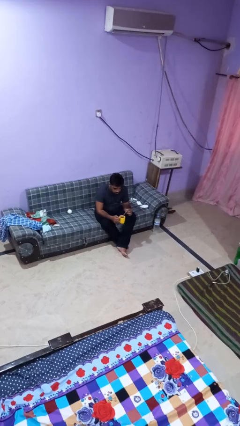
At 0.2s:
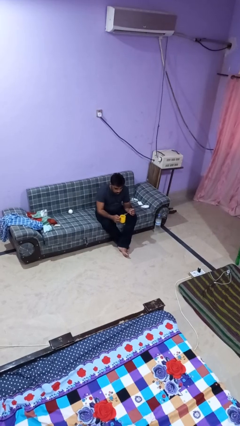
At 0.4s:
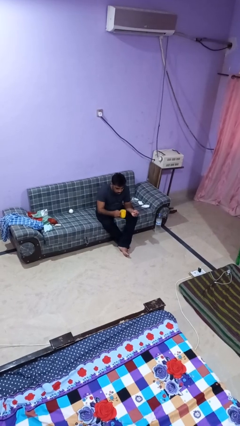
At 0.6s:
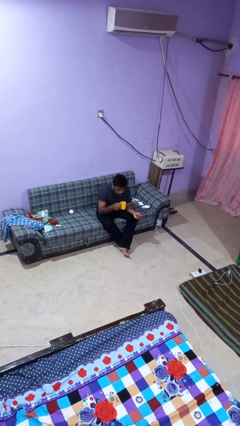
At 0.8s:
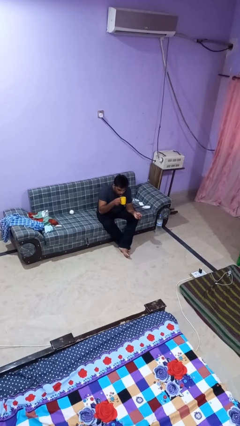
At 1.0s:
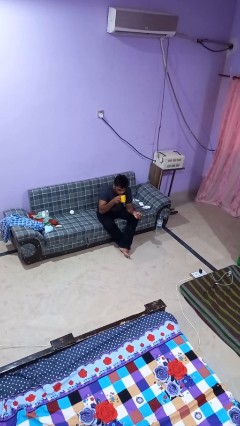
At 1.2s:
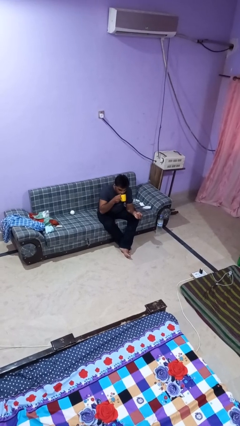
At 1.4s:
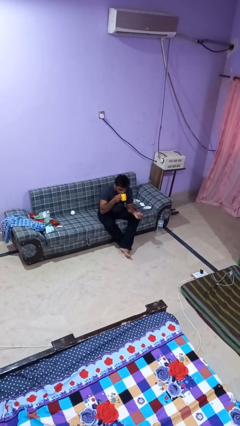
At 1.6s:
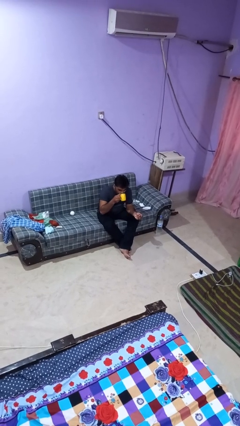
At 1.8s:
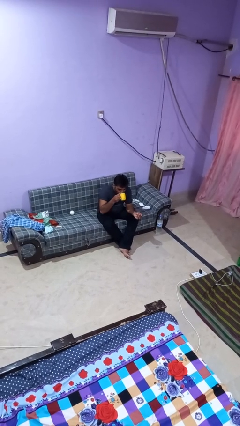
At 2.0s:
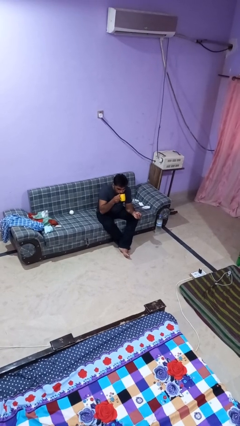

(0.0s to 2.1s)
person drinks from mug

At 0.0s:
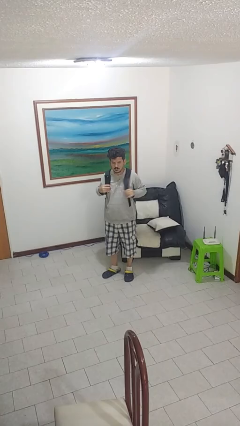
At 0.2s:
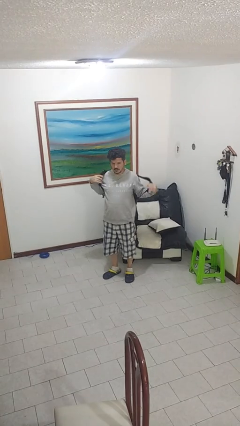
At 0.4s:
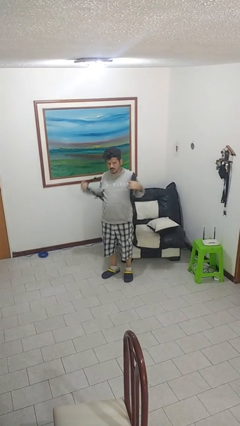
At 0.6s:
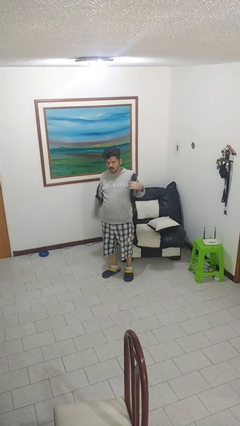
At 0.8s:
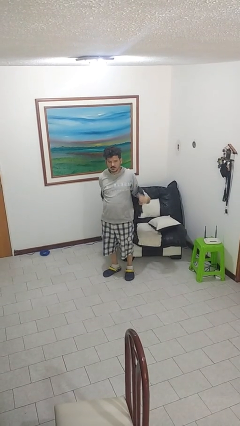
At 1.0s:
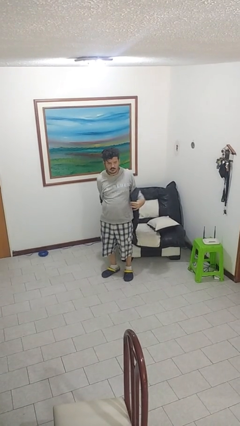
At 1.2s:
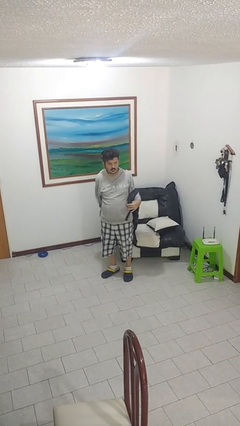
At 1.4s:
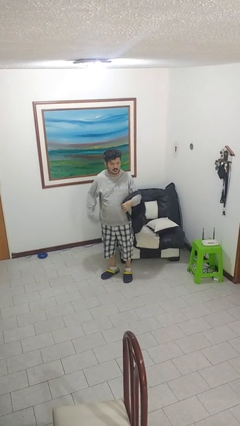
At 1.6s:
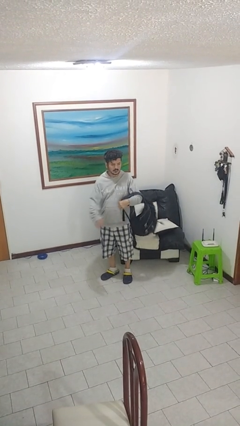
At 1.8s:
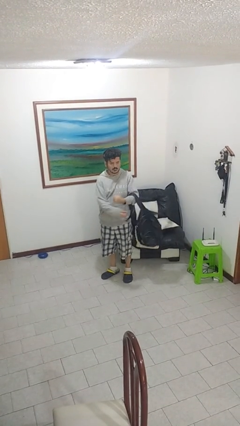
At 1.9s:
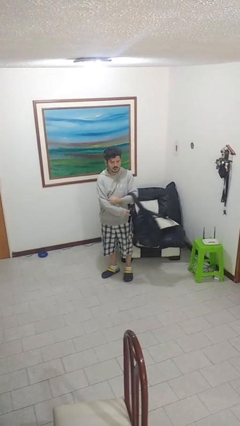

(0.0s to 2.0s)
person takes off backpack

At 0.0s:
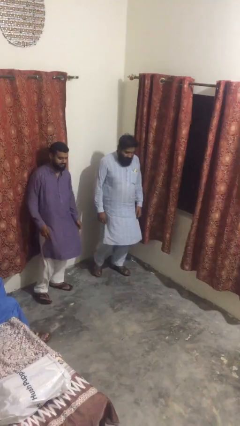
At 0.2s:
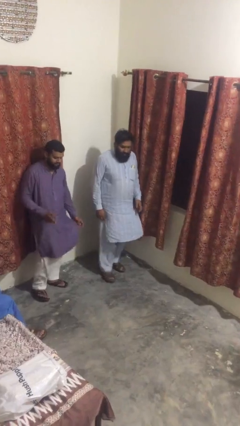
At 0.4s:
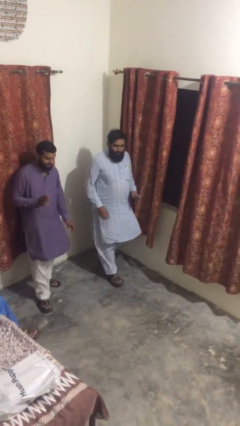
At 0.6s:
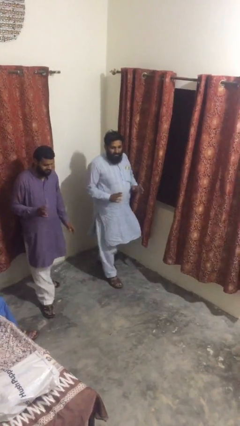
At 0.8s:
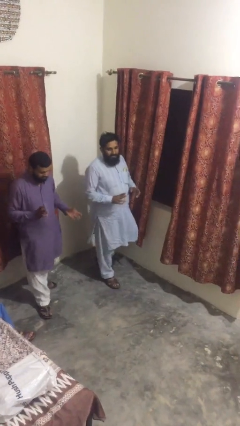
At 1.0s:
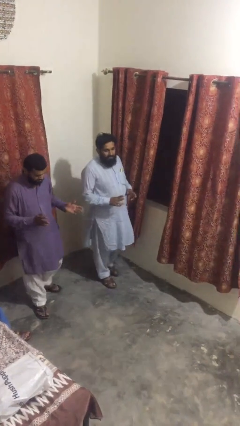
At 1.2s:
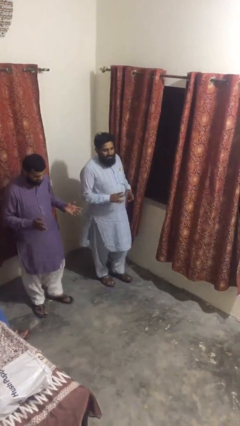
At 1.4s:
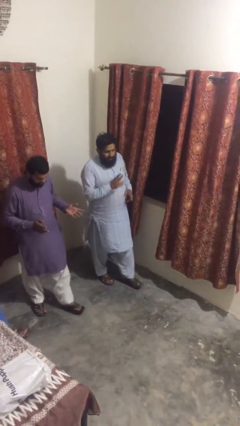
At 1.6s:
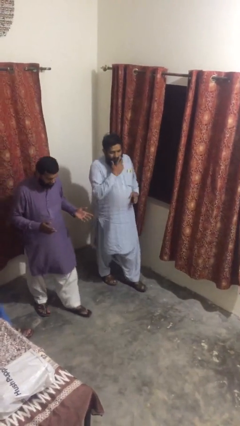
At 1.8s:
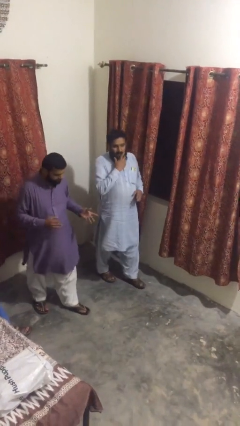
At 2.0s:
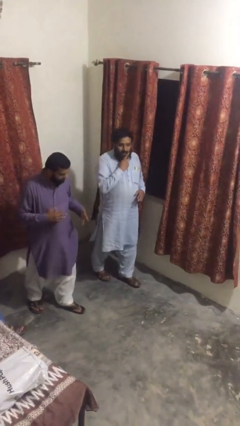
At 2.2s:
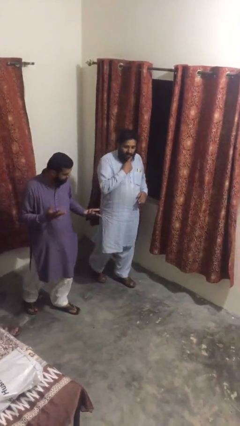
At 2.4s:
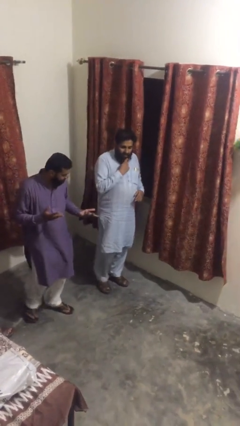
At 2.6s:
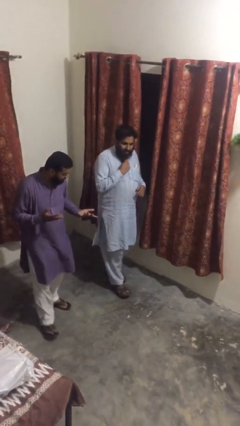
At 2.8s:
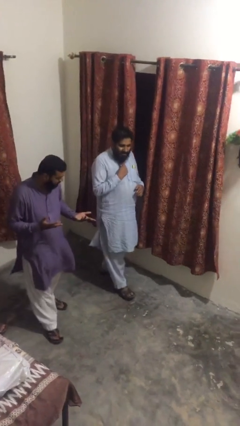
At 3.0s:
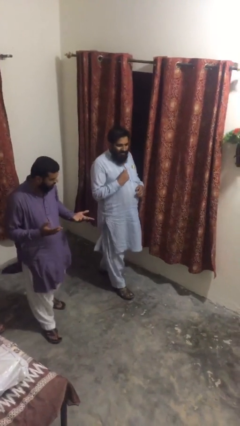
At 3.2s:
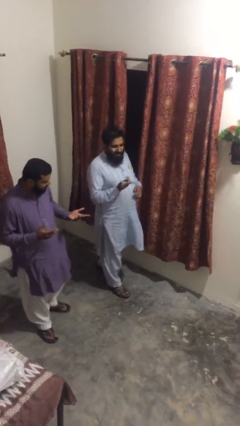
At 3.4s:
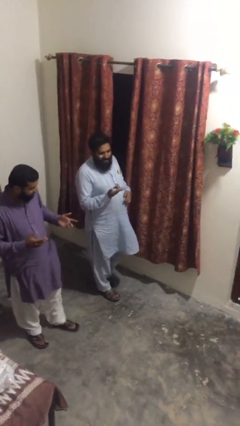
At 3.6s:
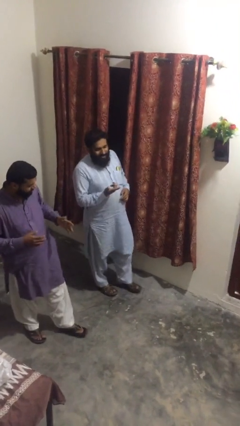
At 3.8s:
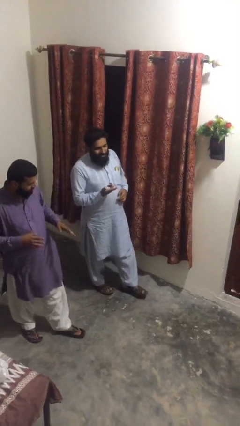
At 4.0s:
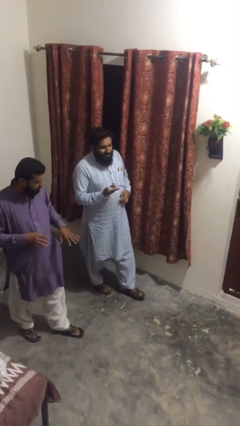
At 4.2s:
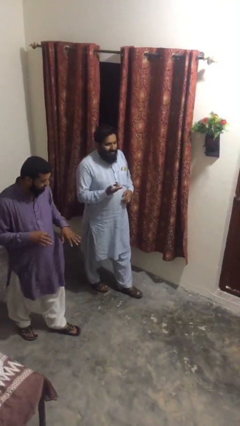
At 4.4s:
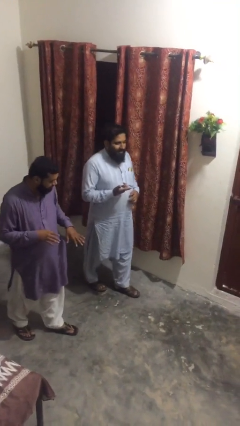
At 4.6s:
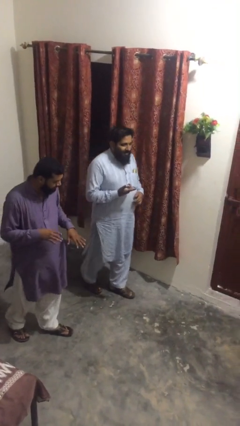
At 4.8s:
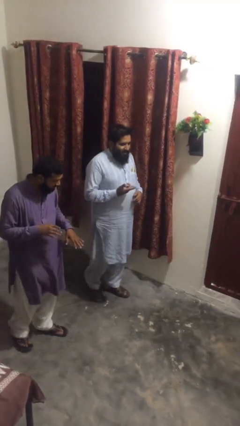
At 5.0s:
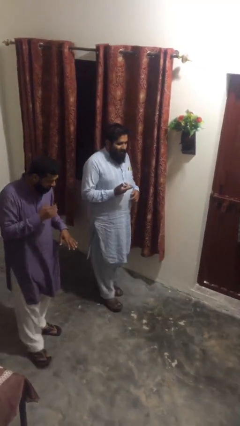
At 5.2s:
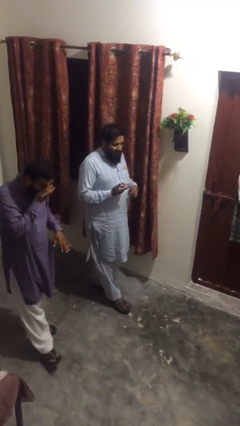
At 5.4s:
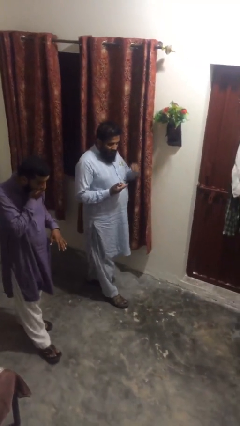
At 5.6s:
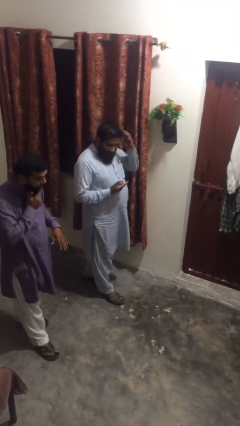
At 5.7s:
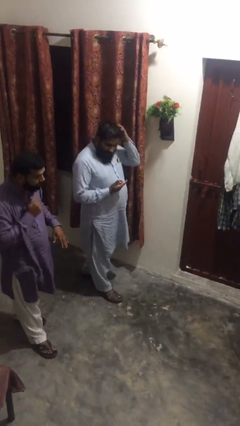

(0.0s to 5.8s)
person talks to person

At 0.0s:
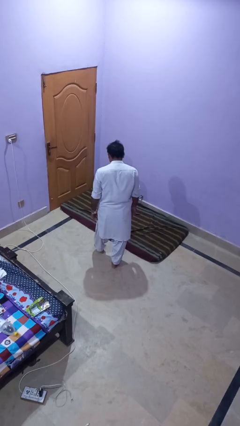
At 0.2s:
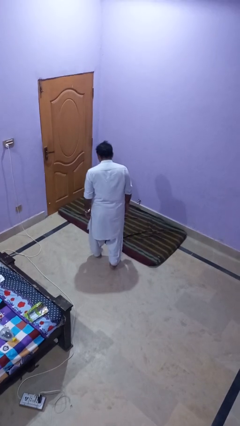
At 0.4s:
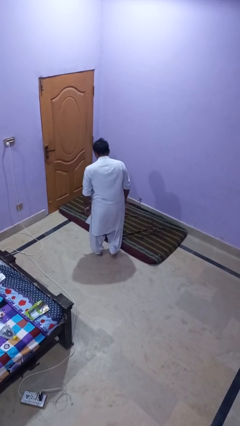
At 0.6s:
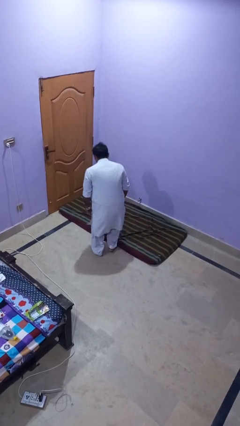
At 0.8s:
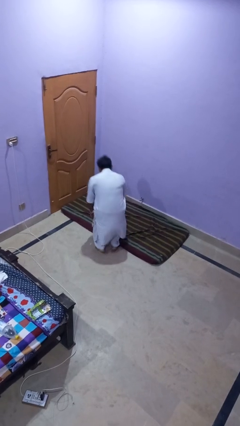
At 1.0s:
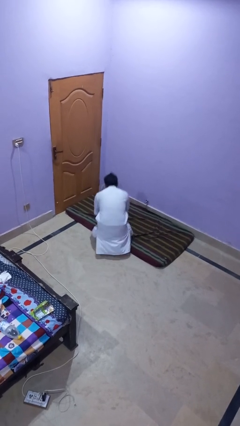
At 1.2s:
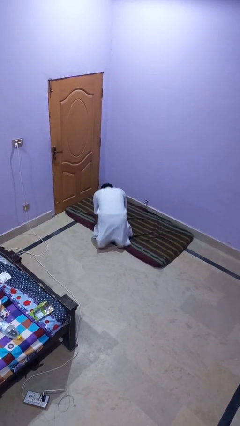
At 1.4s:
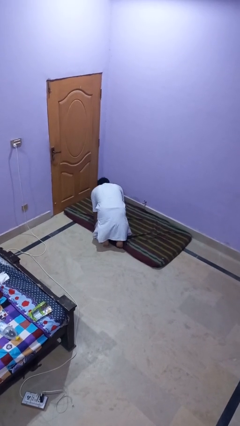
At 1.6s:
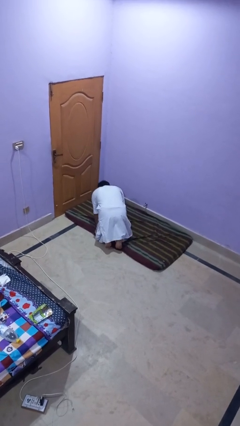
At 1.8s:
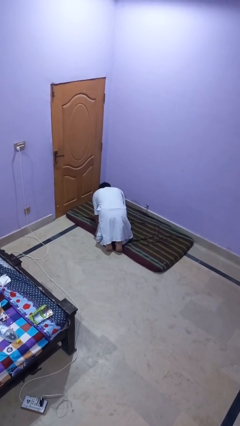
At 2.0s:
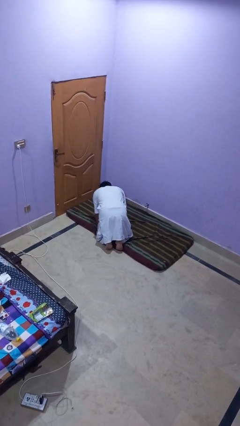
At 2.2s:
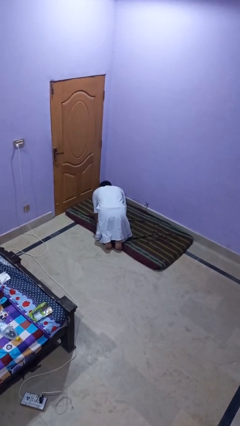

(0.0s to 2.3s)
person trips on object on floor

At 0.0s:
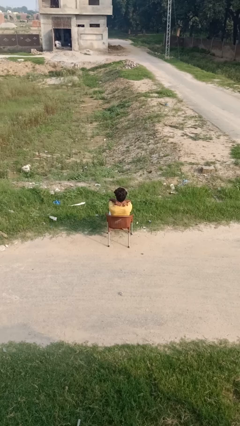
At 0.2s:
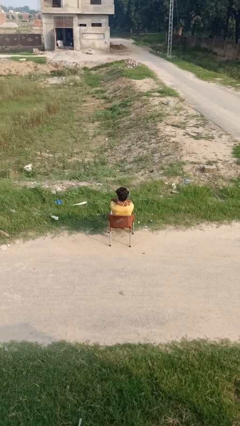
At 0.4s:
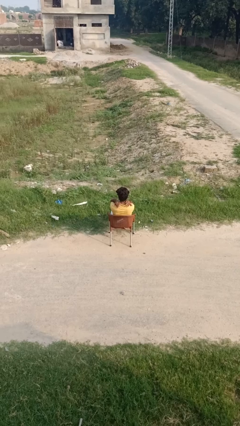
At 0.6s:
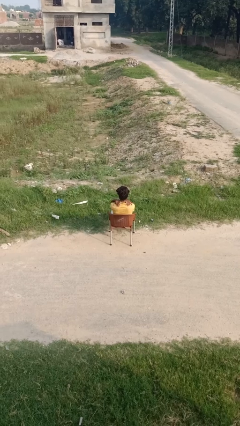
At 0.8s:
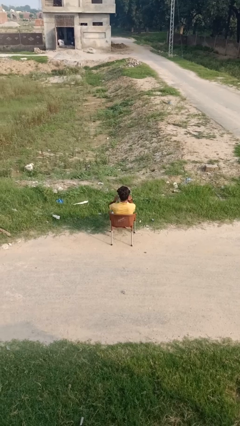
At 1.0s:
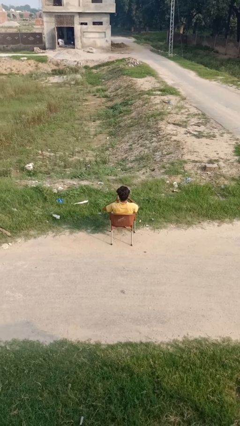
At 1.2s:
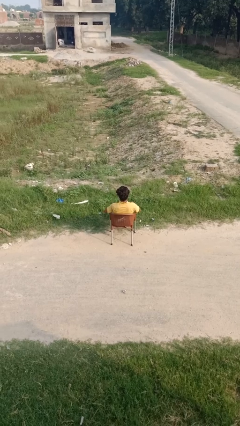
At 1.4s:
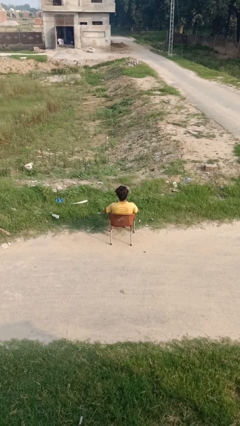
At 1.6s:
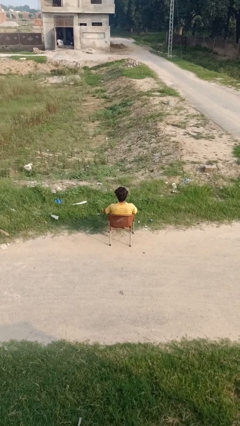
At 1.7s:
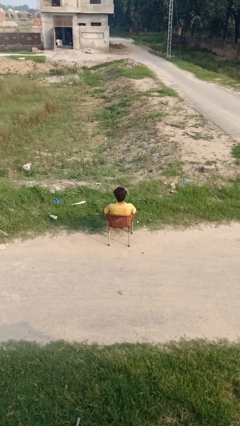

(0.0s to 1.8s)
person shrugs

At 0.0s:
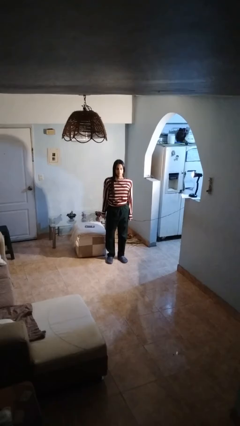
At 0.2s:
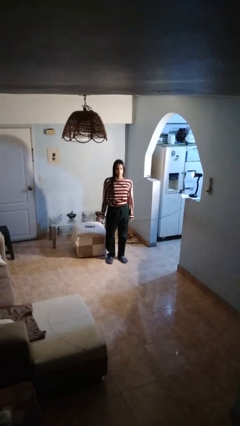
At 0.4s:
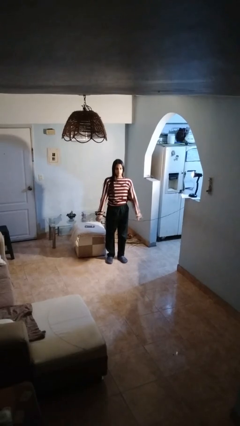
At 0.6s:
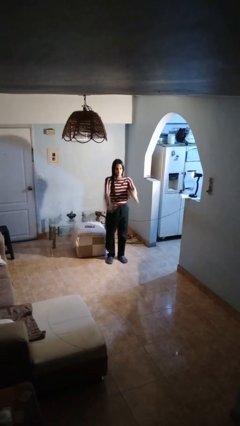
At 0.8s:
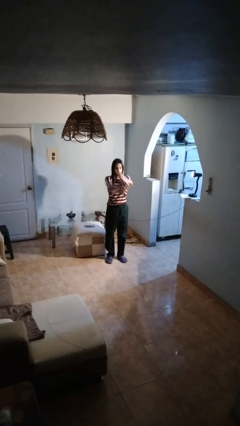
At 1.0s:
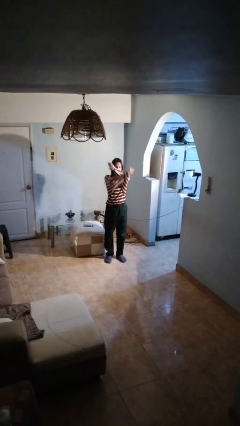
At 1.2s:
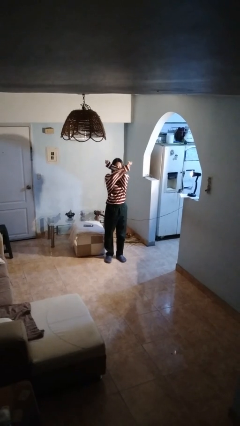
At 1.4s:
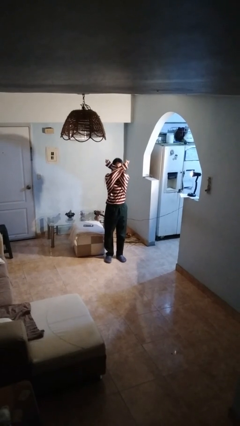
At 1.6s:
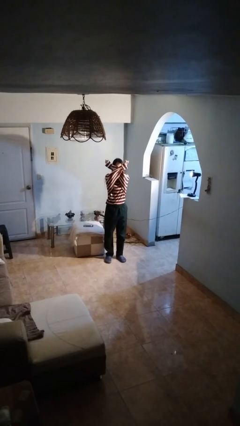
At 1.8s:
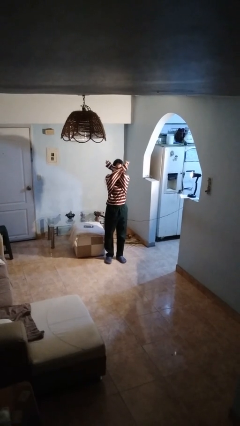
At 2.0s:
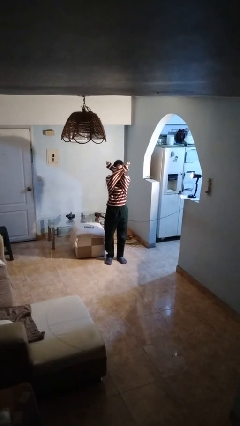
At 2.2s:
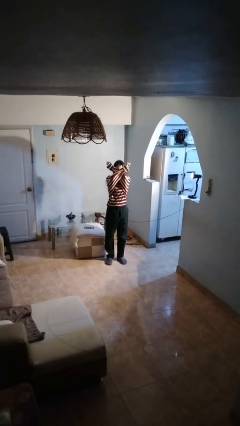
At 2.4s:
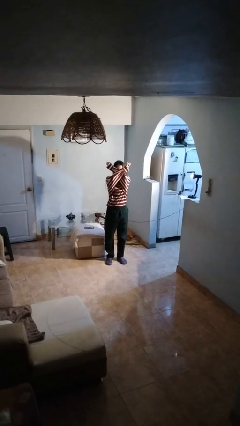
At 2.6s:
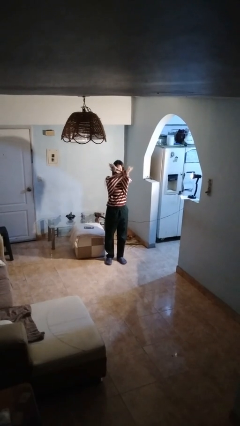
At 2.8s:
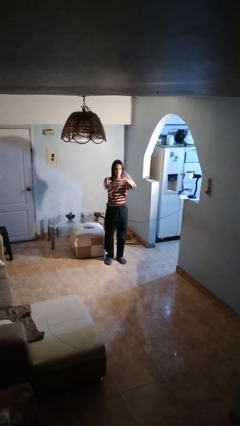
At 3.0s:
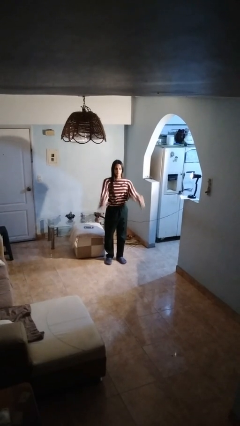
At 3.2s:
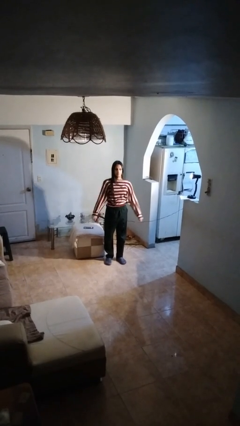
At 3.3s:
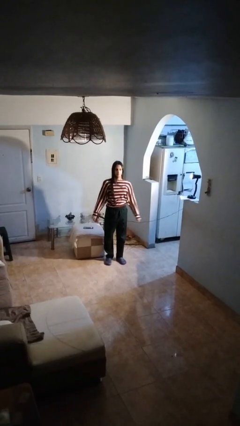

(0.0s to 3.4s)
person gestures arms x

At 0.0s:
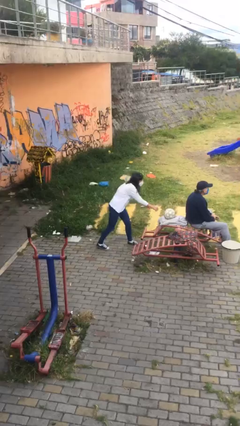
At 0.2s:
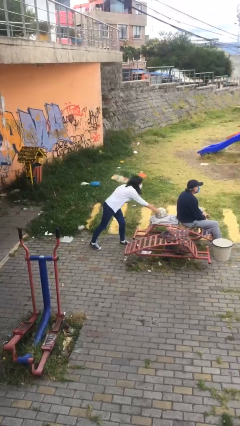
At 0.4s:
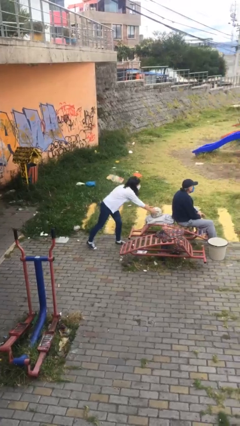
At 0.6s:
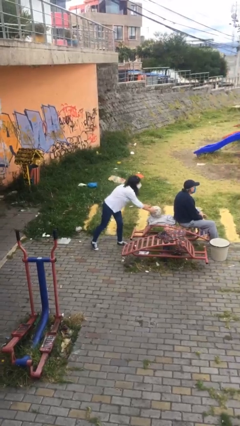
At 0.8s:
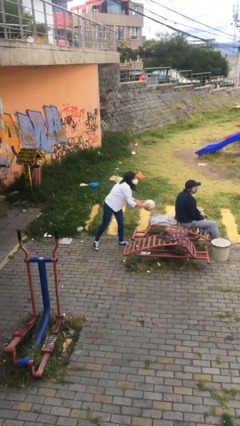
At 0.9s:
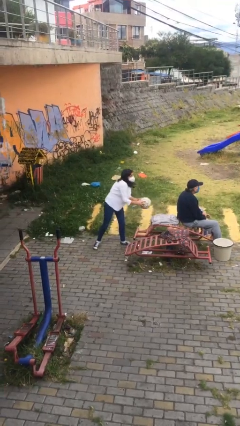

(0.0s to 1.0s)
person steals object from person
